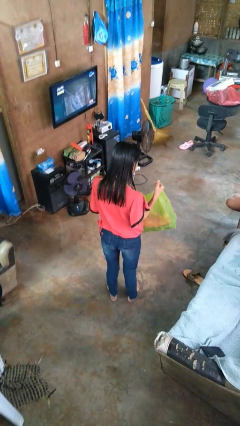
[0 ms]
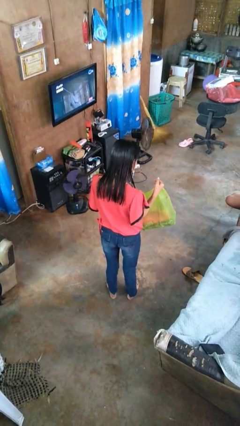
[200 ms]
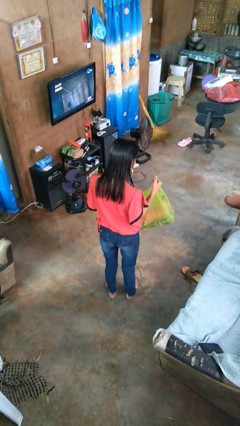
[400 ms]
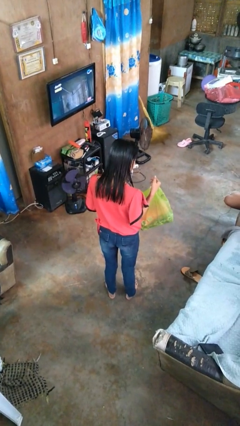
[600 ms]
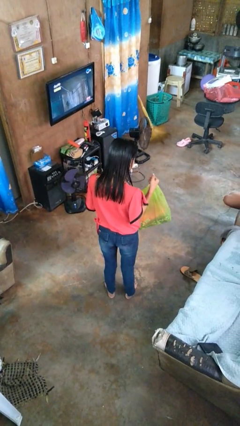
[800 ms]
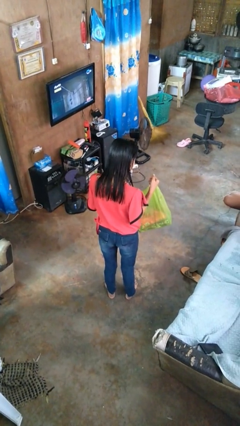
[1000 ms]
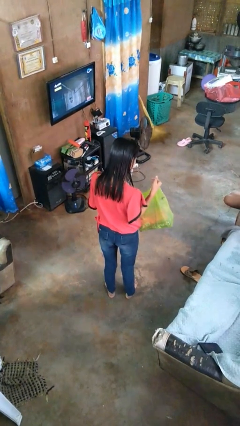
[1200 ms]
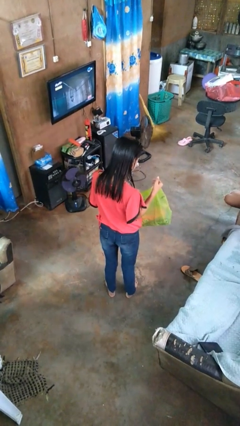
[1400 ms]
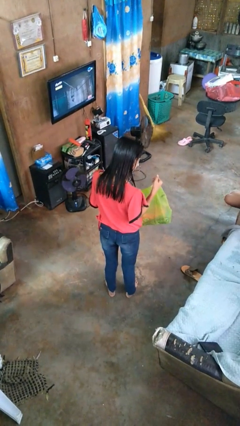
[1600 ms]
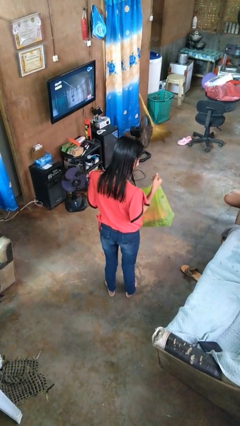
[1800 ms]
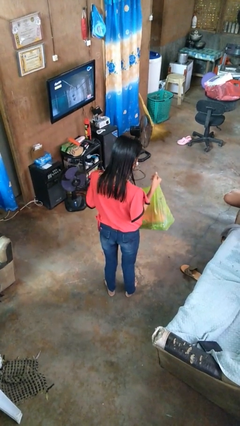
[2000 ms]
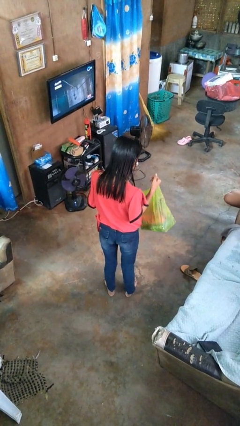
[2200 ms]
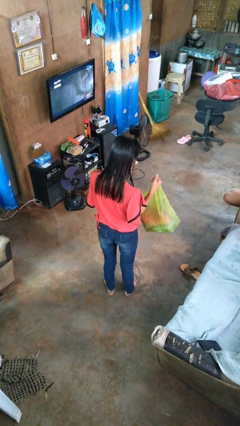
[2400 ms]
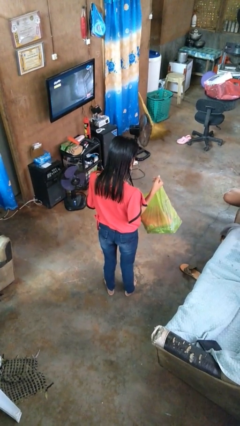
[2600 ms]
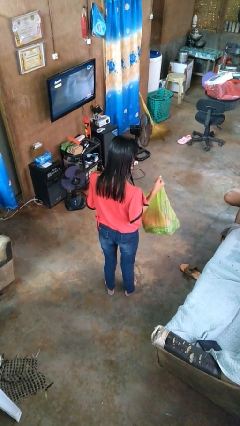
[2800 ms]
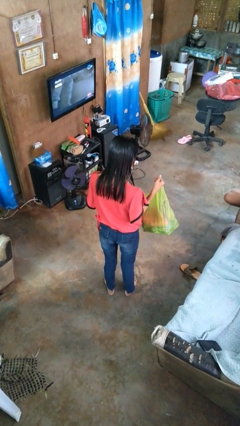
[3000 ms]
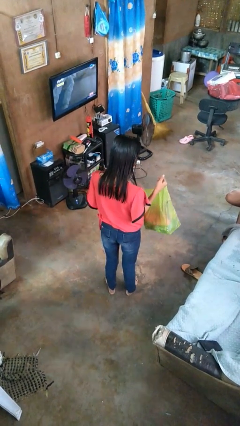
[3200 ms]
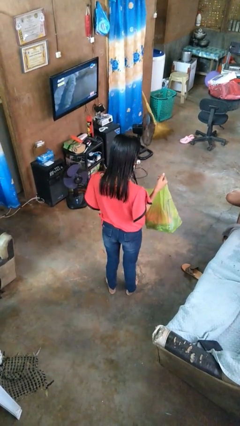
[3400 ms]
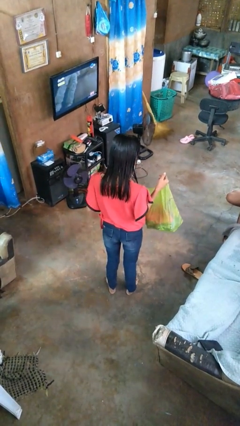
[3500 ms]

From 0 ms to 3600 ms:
person searches in bag

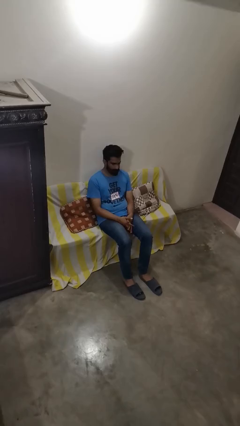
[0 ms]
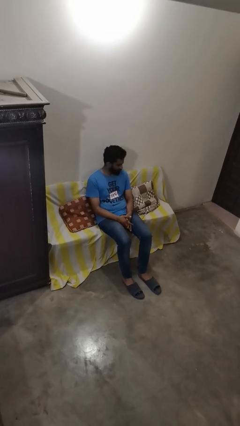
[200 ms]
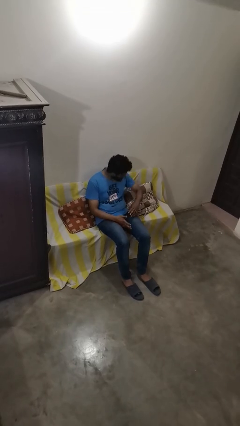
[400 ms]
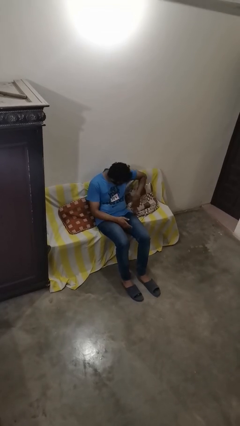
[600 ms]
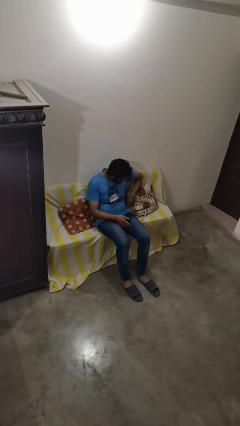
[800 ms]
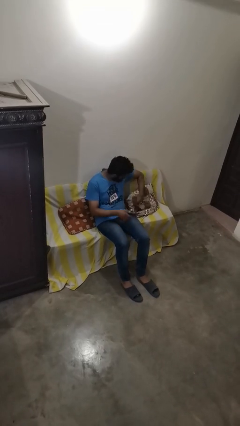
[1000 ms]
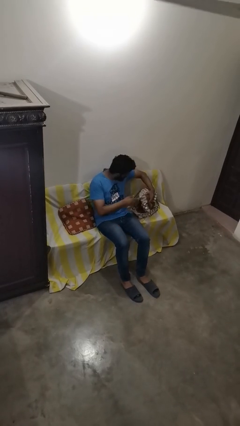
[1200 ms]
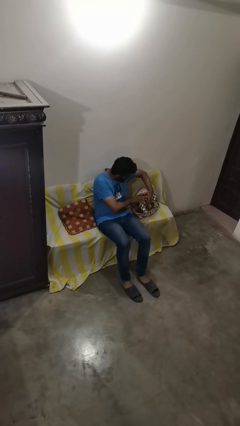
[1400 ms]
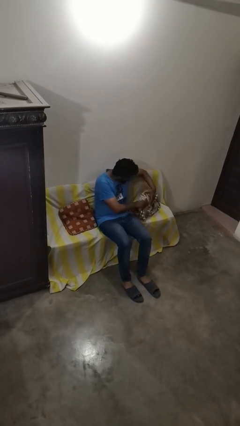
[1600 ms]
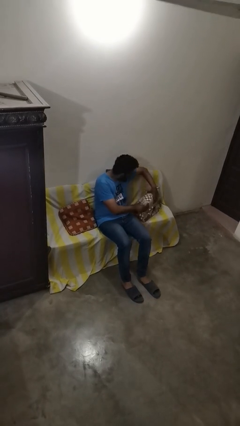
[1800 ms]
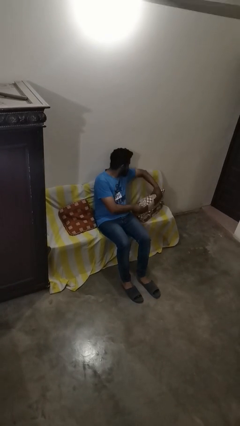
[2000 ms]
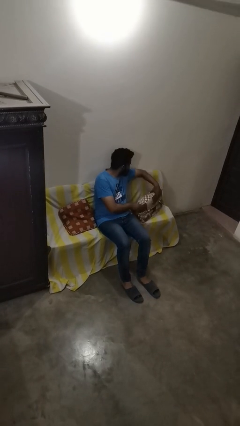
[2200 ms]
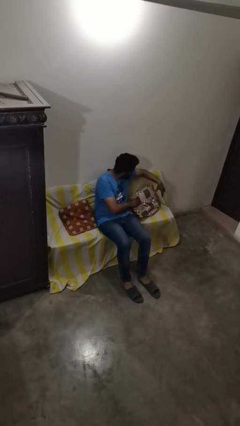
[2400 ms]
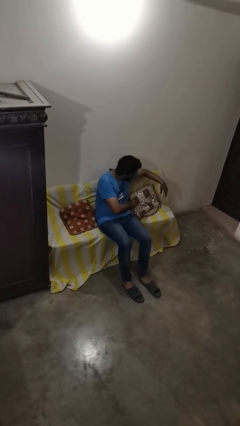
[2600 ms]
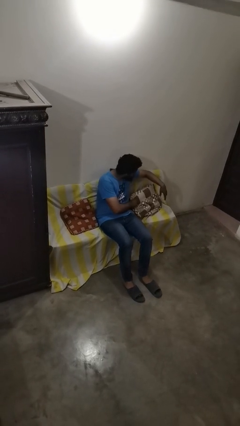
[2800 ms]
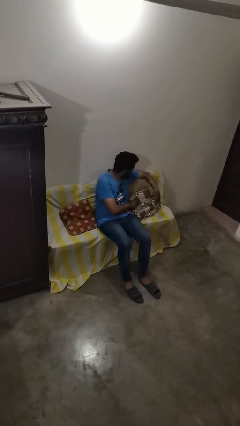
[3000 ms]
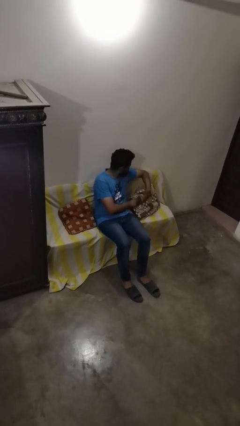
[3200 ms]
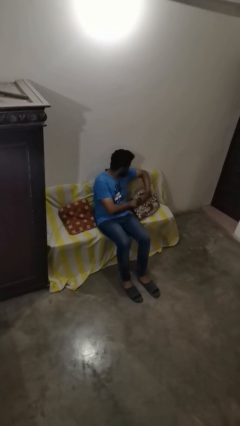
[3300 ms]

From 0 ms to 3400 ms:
person searches in couch

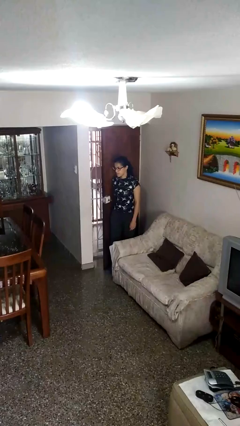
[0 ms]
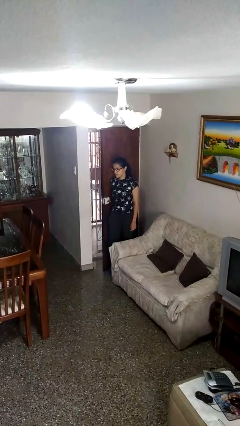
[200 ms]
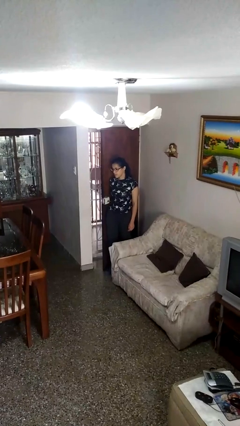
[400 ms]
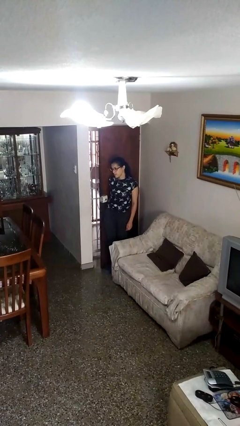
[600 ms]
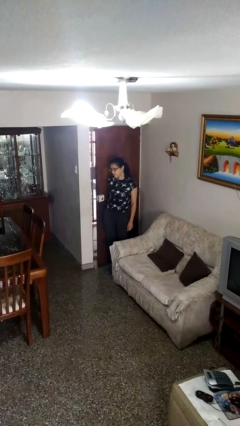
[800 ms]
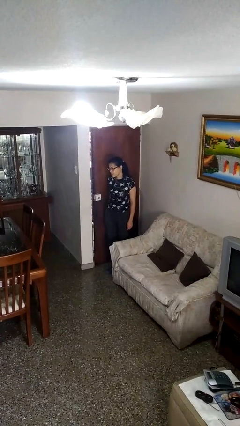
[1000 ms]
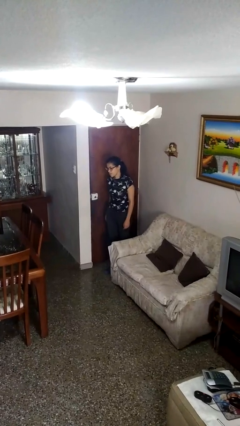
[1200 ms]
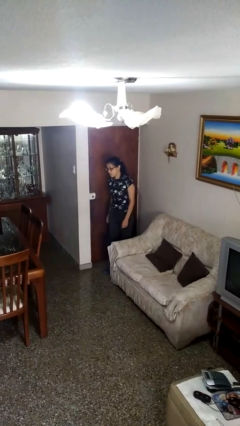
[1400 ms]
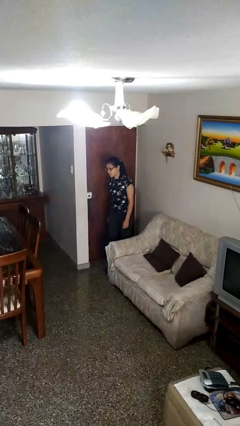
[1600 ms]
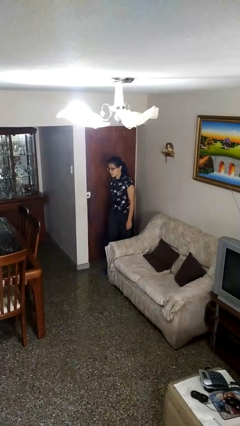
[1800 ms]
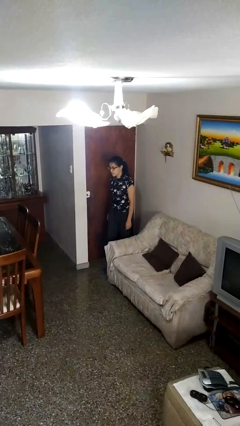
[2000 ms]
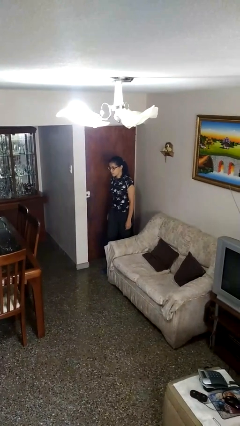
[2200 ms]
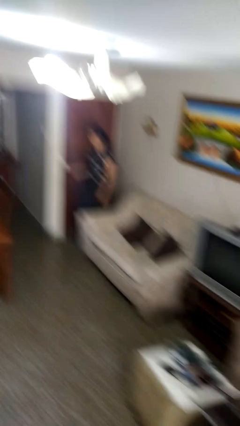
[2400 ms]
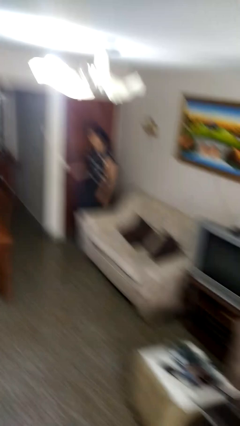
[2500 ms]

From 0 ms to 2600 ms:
person closes door with hip

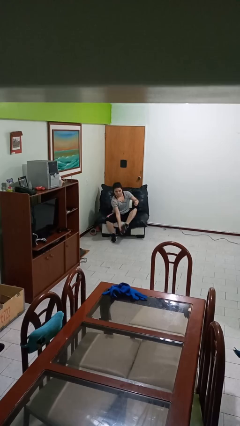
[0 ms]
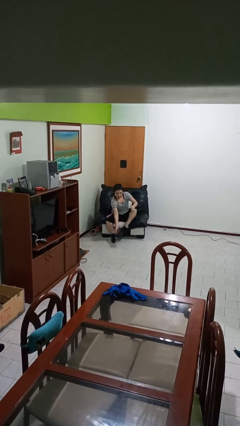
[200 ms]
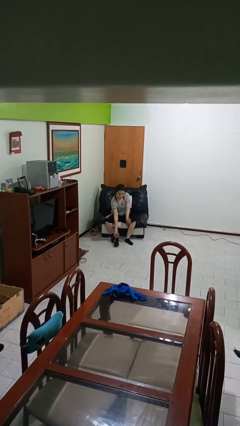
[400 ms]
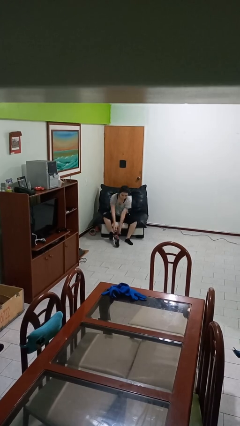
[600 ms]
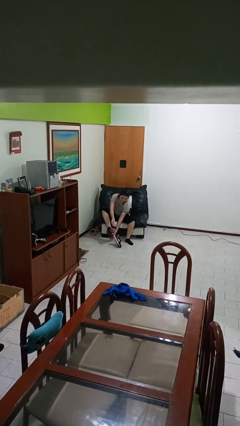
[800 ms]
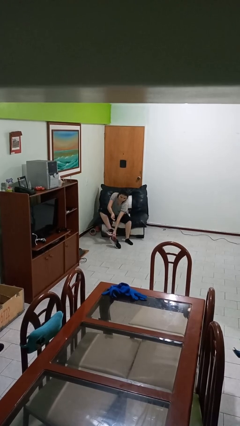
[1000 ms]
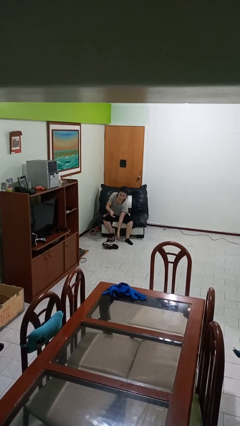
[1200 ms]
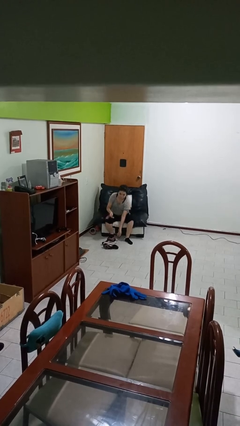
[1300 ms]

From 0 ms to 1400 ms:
person takes off shoes

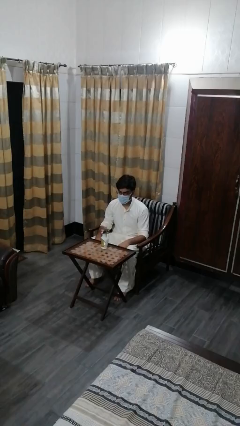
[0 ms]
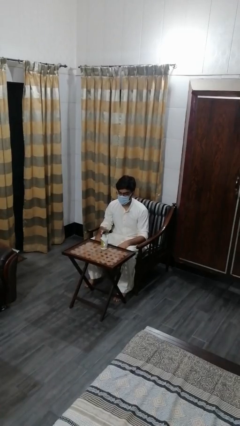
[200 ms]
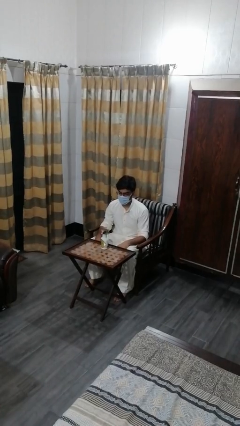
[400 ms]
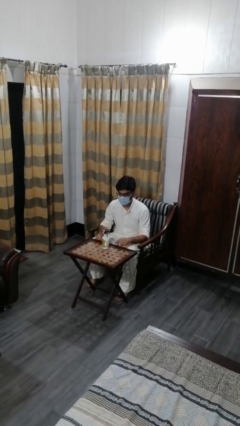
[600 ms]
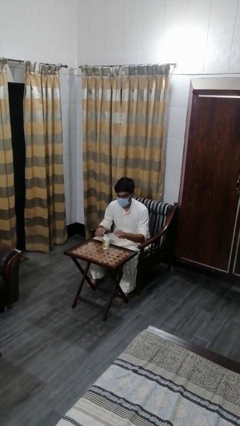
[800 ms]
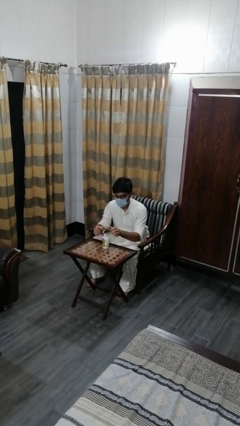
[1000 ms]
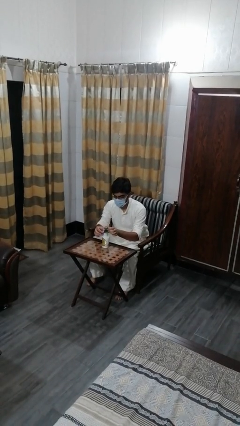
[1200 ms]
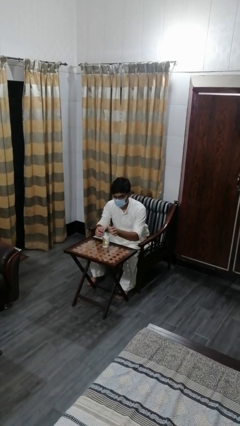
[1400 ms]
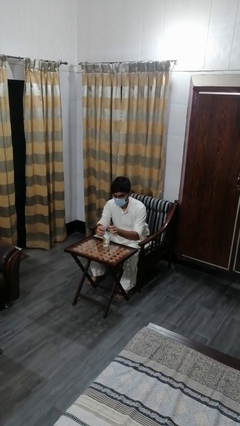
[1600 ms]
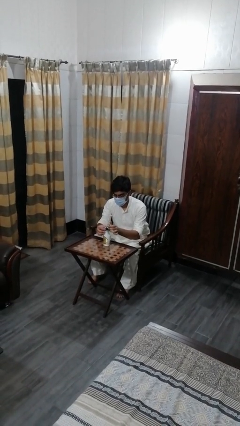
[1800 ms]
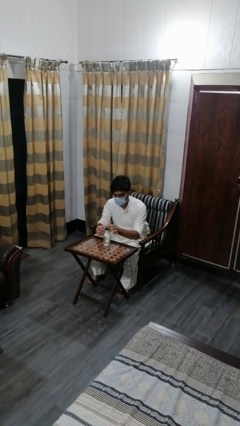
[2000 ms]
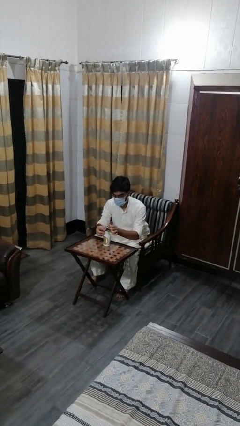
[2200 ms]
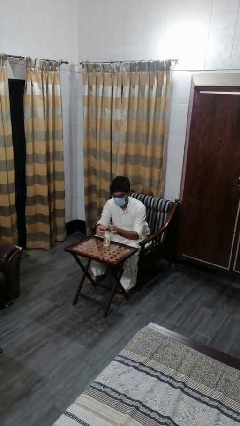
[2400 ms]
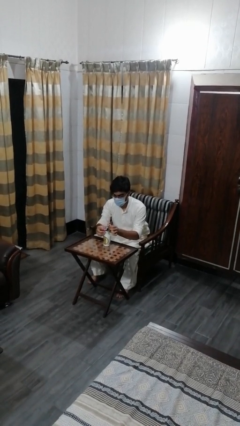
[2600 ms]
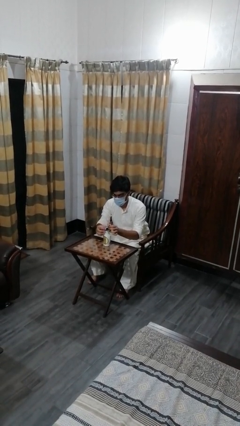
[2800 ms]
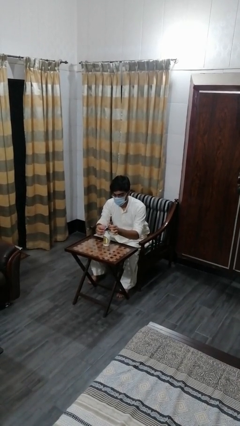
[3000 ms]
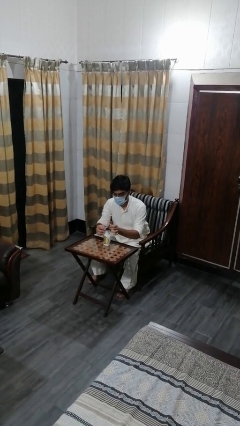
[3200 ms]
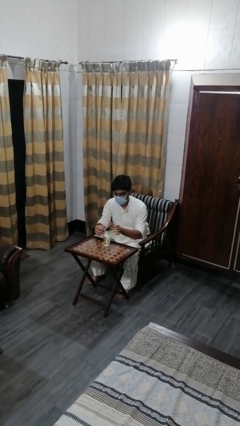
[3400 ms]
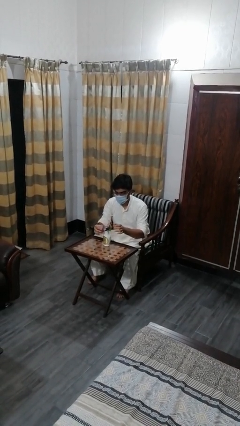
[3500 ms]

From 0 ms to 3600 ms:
person arranges flowers in vase

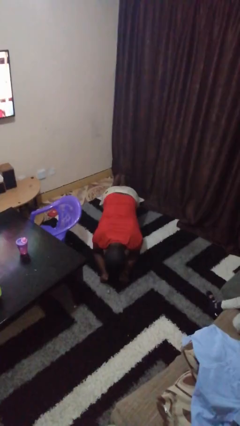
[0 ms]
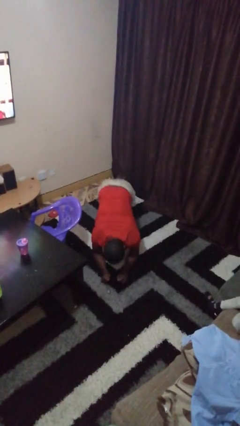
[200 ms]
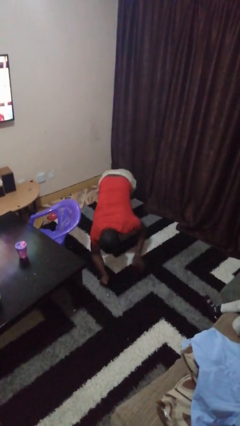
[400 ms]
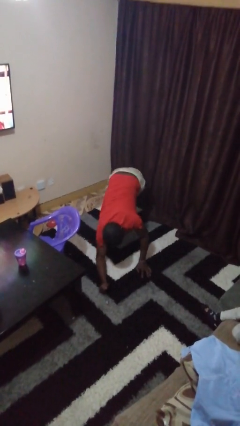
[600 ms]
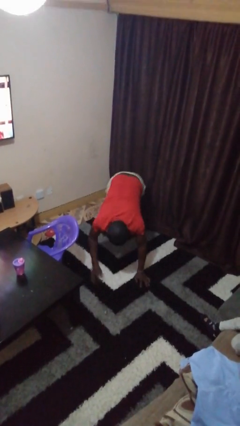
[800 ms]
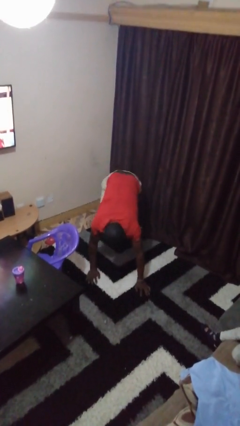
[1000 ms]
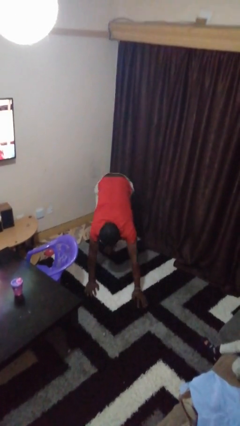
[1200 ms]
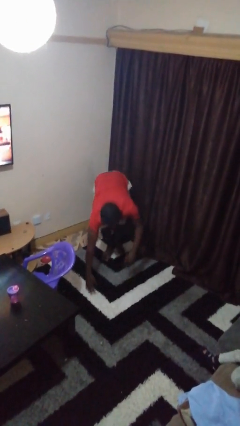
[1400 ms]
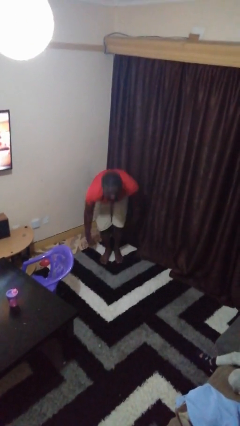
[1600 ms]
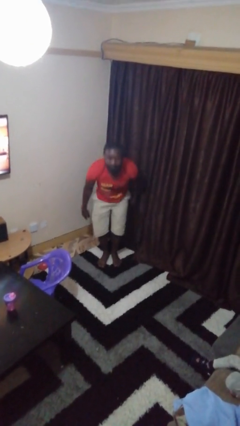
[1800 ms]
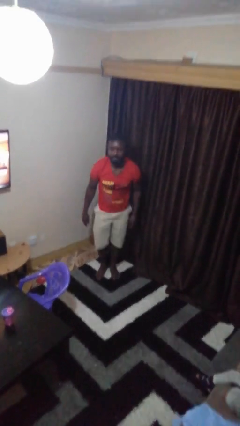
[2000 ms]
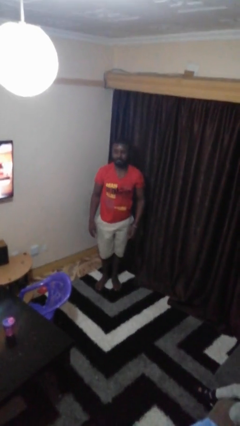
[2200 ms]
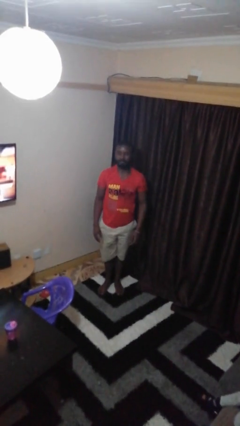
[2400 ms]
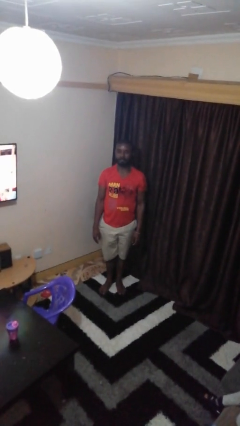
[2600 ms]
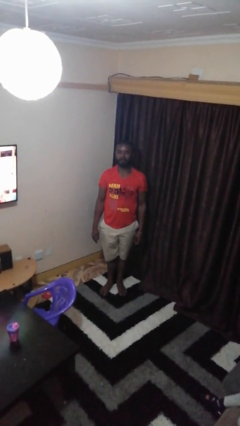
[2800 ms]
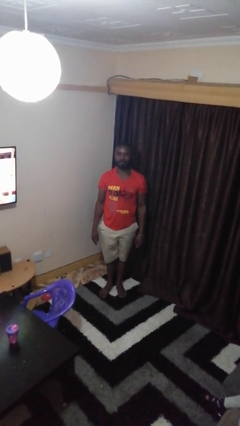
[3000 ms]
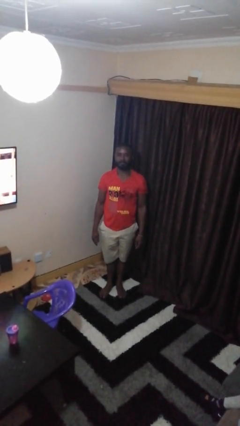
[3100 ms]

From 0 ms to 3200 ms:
person stands up from floor
